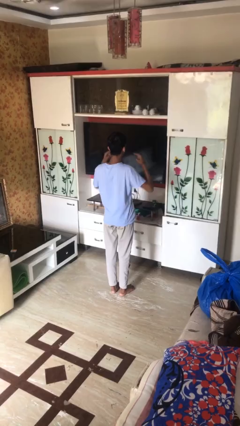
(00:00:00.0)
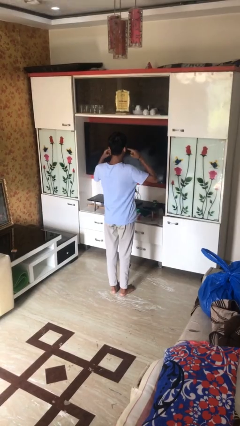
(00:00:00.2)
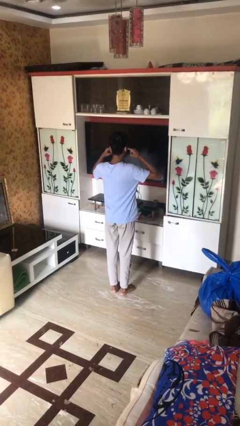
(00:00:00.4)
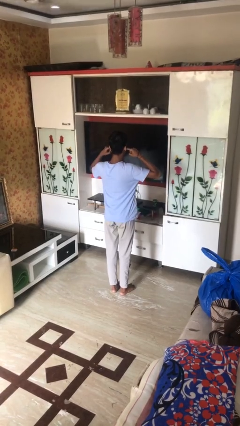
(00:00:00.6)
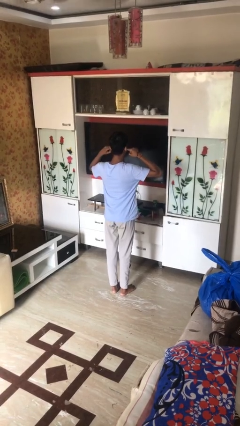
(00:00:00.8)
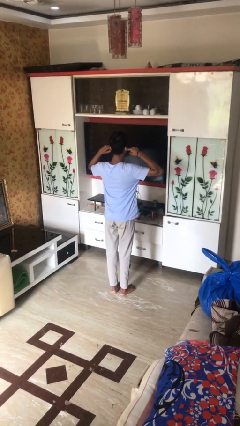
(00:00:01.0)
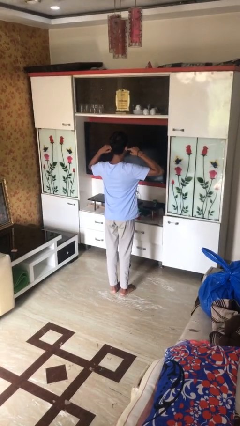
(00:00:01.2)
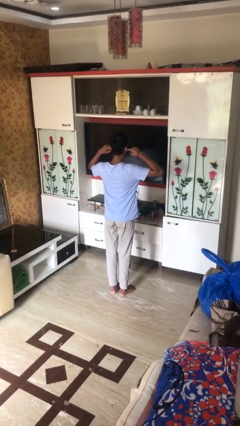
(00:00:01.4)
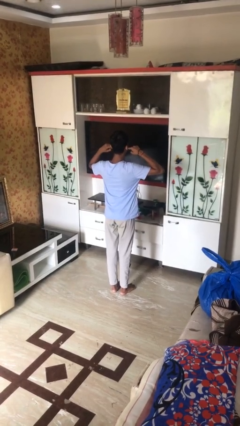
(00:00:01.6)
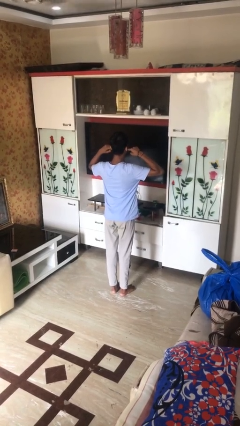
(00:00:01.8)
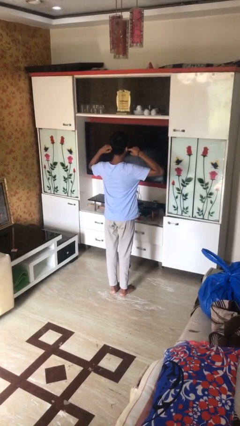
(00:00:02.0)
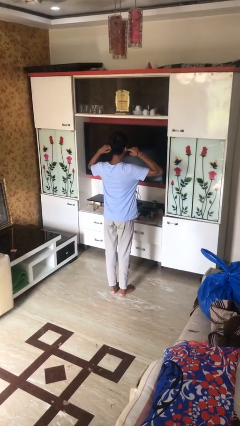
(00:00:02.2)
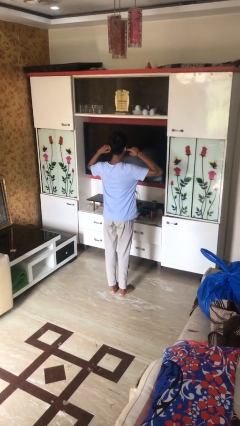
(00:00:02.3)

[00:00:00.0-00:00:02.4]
person puts fingers in ear

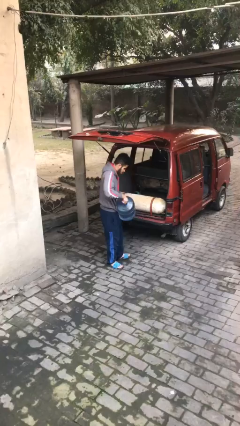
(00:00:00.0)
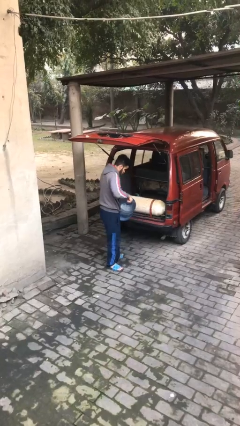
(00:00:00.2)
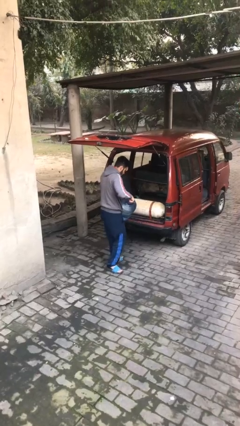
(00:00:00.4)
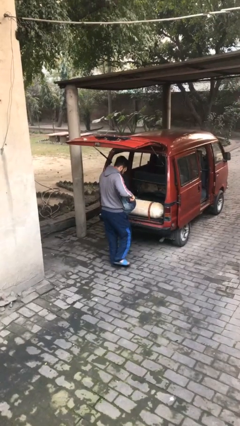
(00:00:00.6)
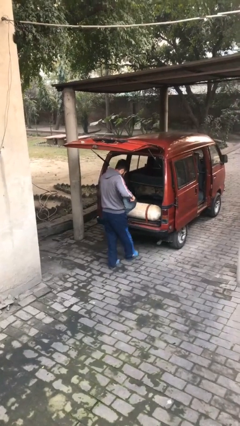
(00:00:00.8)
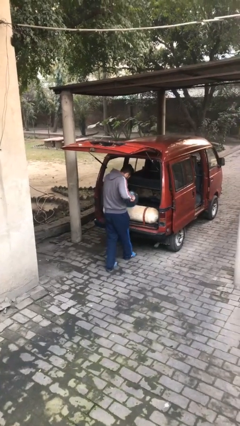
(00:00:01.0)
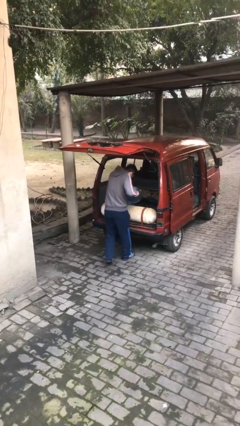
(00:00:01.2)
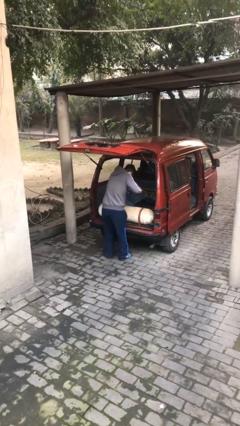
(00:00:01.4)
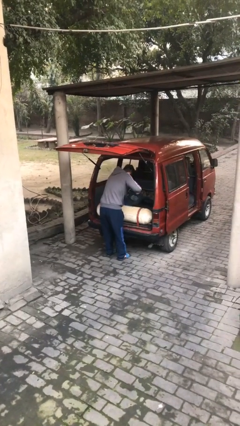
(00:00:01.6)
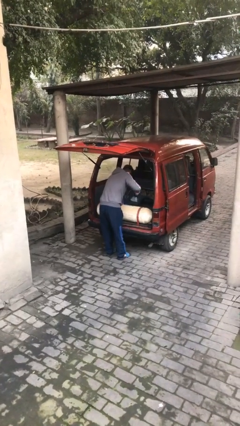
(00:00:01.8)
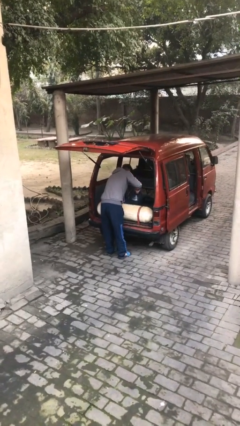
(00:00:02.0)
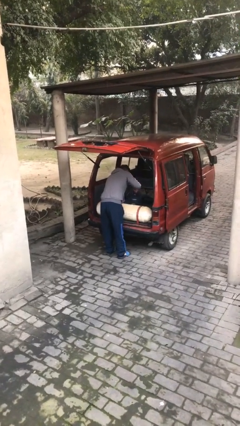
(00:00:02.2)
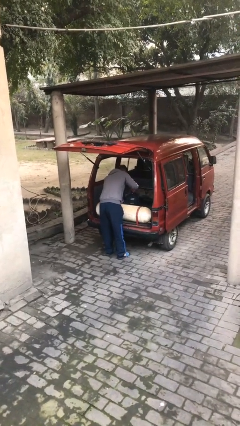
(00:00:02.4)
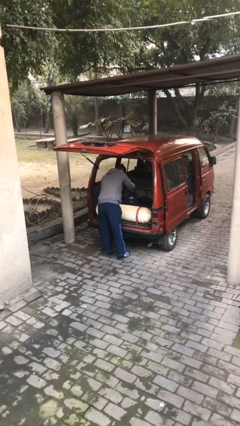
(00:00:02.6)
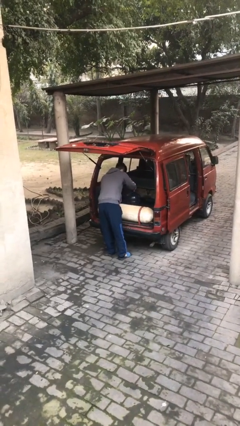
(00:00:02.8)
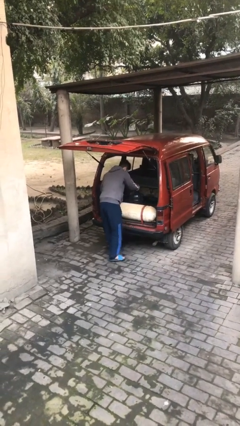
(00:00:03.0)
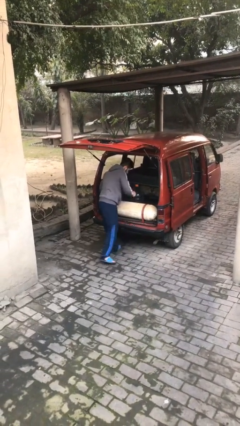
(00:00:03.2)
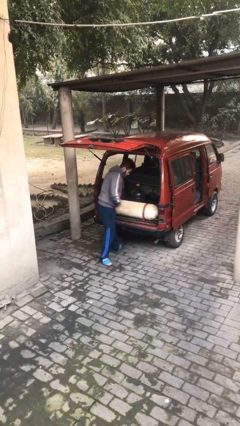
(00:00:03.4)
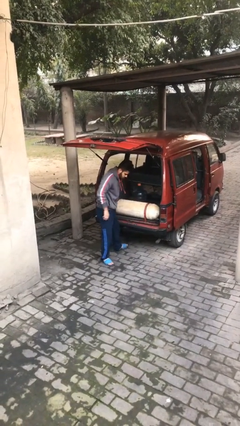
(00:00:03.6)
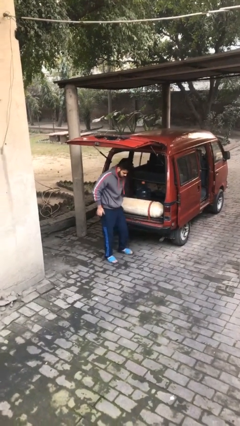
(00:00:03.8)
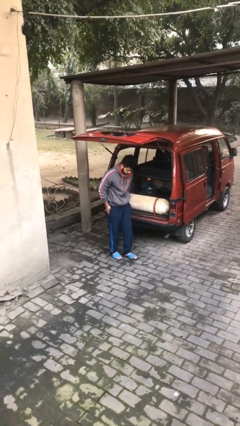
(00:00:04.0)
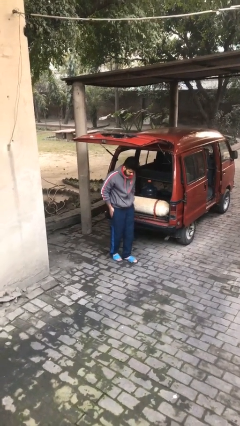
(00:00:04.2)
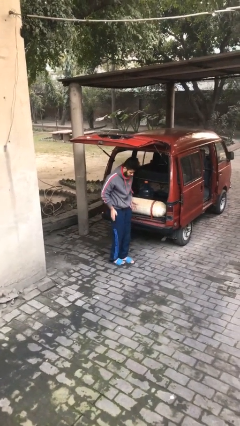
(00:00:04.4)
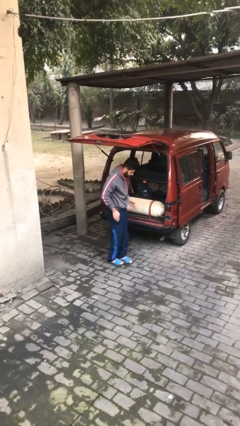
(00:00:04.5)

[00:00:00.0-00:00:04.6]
person loads car

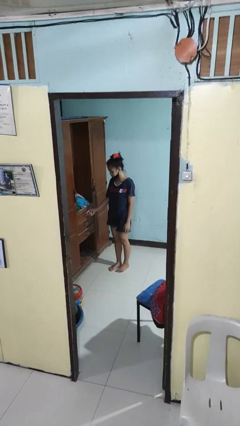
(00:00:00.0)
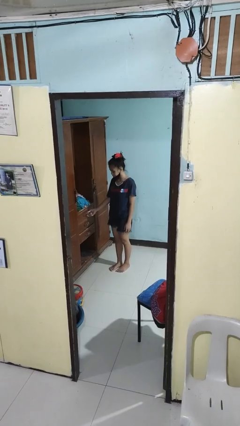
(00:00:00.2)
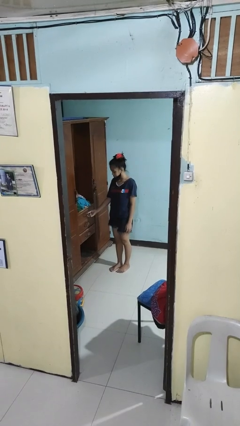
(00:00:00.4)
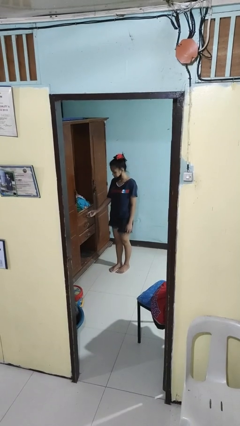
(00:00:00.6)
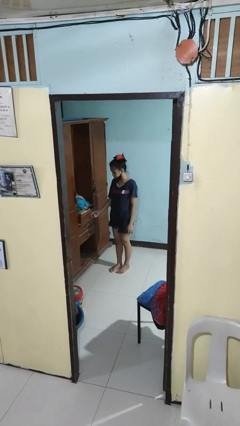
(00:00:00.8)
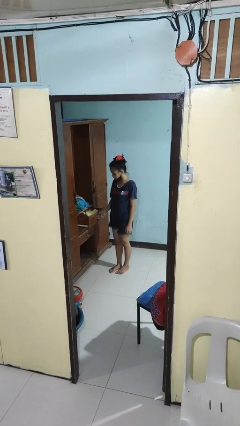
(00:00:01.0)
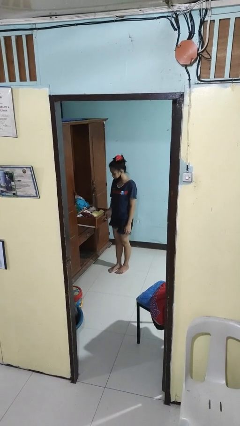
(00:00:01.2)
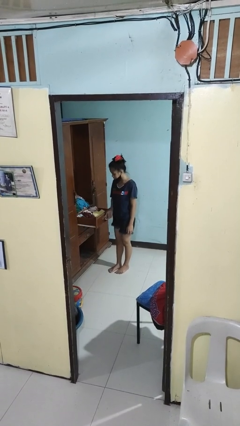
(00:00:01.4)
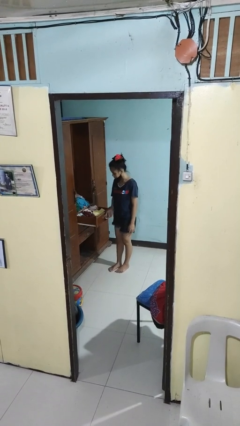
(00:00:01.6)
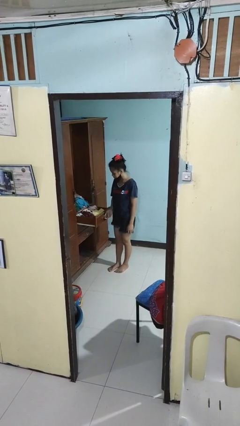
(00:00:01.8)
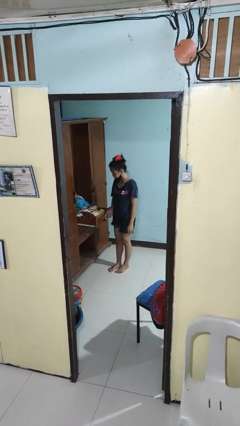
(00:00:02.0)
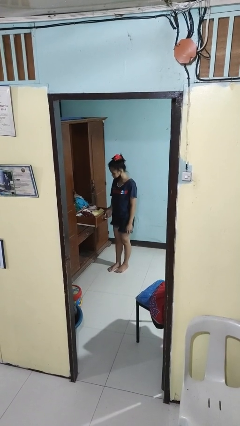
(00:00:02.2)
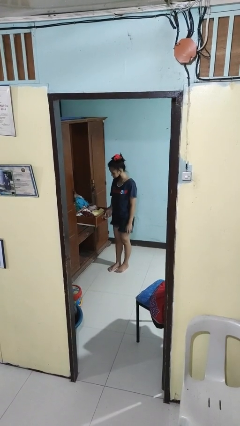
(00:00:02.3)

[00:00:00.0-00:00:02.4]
person opens dresser drawer

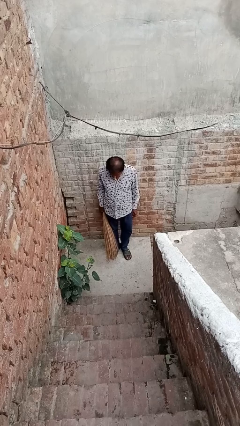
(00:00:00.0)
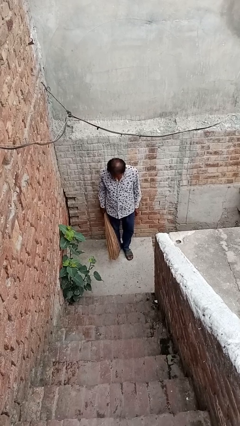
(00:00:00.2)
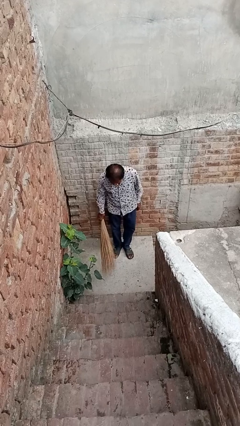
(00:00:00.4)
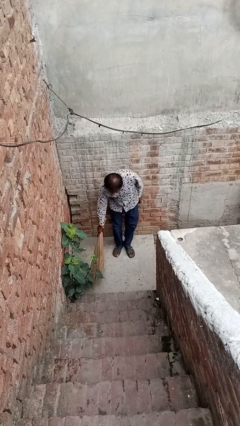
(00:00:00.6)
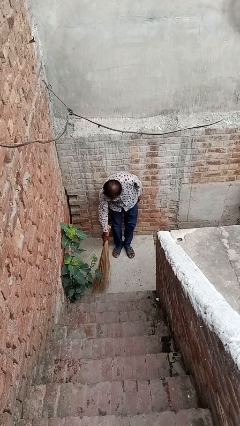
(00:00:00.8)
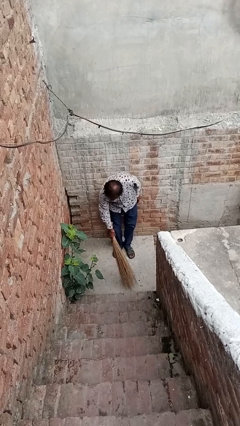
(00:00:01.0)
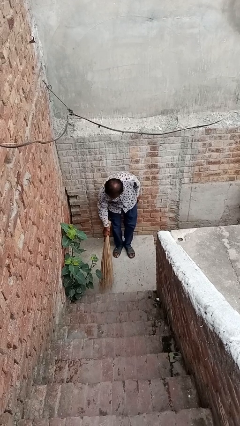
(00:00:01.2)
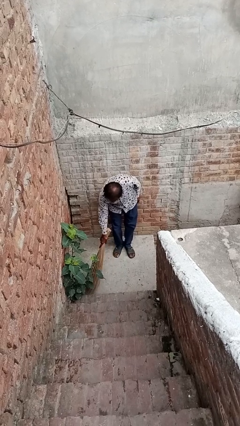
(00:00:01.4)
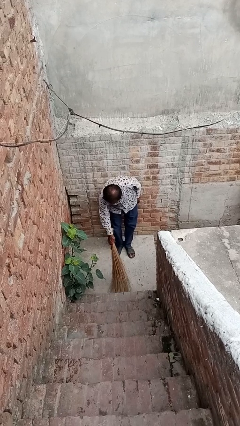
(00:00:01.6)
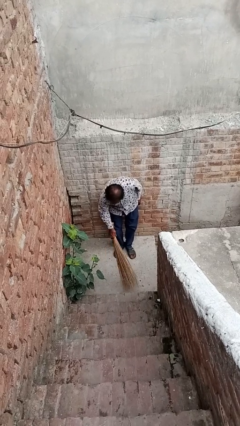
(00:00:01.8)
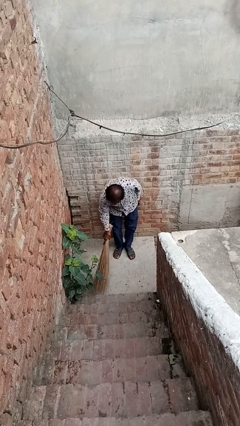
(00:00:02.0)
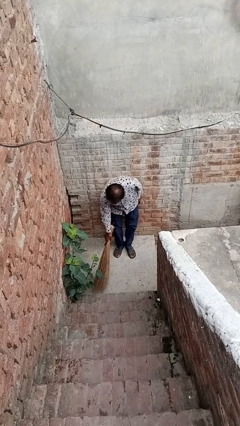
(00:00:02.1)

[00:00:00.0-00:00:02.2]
person sweeps floor

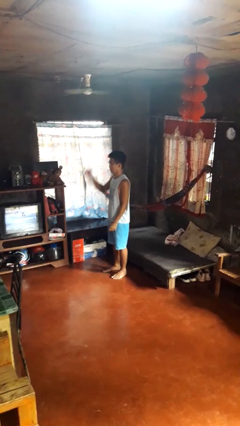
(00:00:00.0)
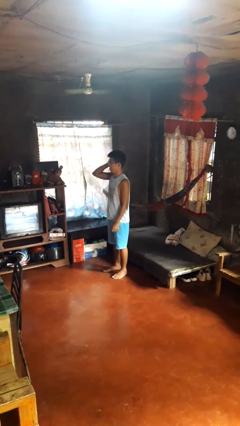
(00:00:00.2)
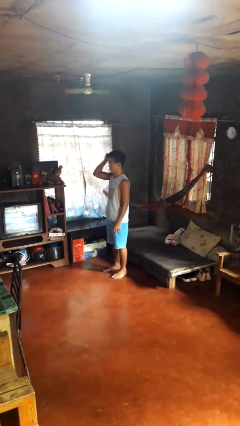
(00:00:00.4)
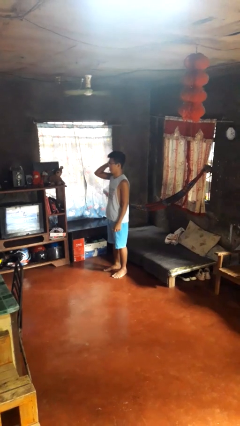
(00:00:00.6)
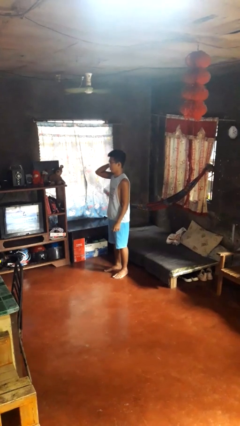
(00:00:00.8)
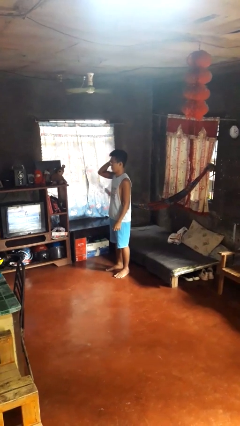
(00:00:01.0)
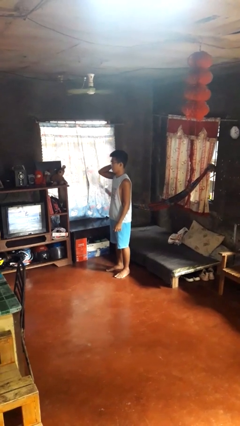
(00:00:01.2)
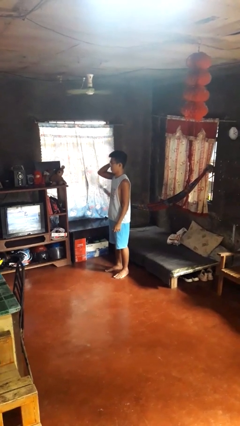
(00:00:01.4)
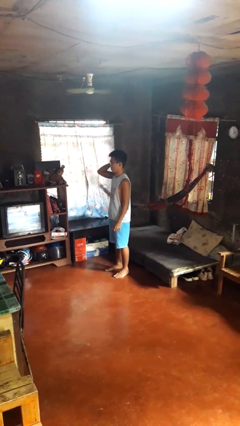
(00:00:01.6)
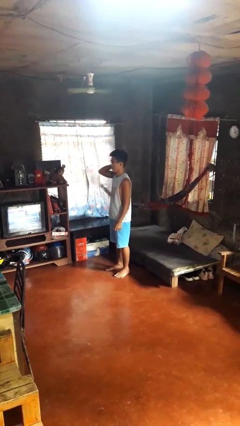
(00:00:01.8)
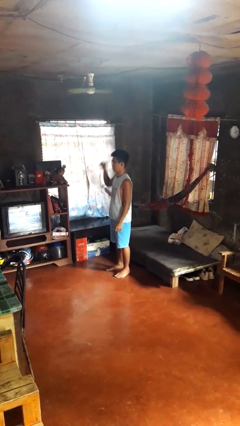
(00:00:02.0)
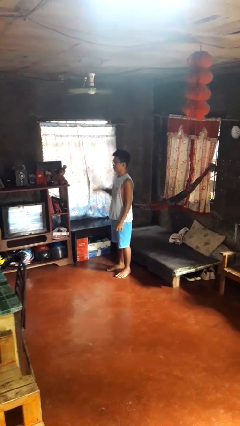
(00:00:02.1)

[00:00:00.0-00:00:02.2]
person gestures behind me

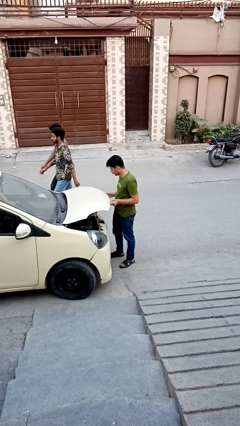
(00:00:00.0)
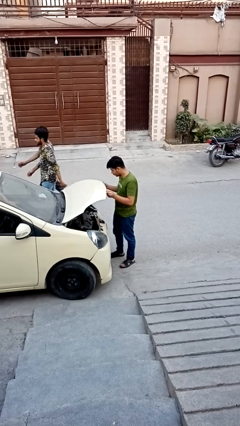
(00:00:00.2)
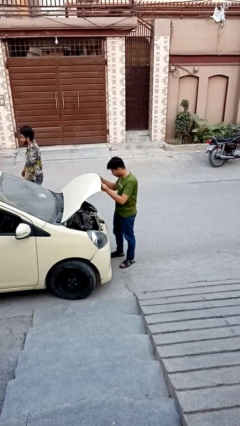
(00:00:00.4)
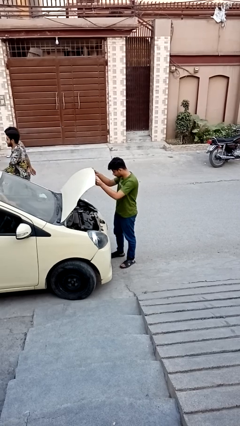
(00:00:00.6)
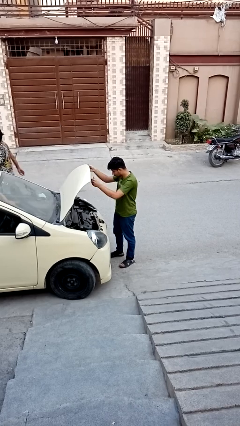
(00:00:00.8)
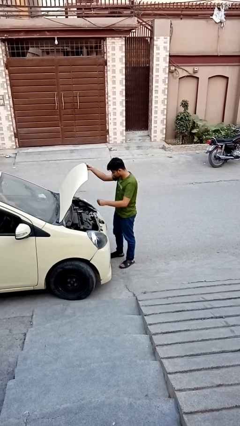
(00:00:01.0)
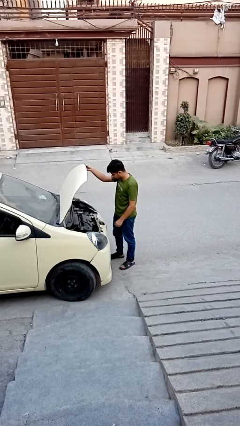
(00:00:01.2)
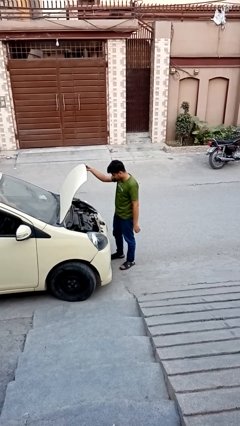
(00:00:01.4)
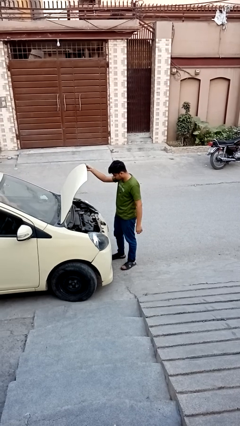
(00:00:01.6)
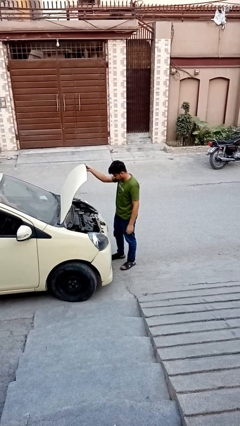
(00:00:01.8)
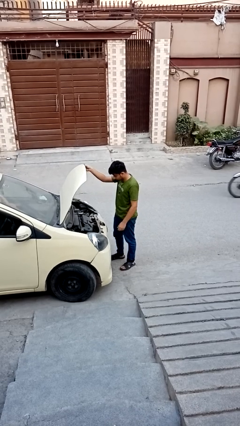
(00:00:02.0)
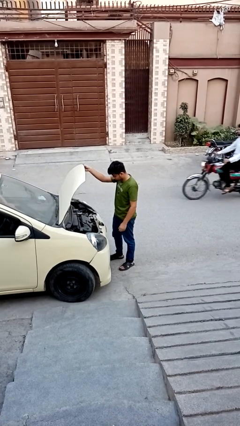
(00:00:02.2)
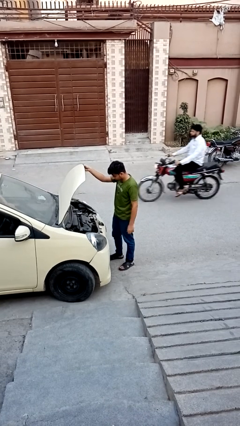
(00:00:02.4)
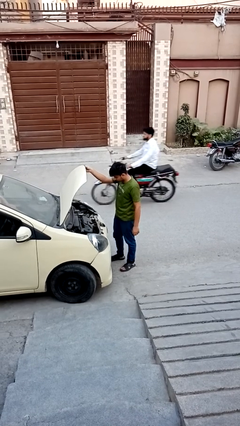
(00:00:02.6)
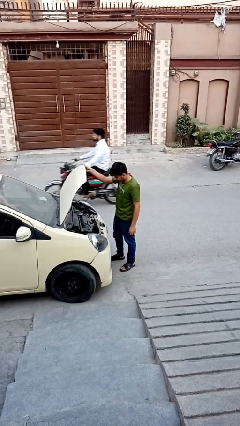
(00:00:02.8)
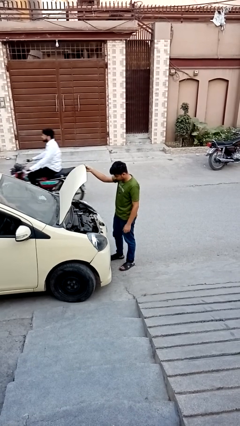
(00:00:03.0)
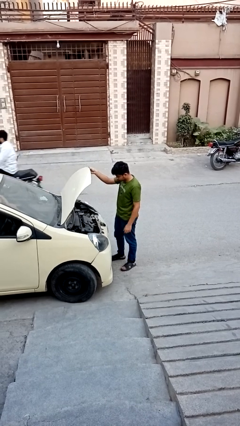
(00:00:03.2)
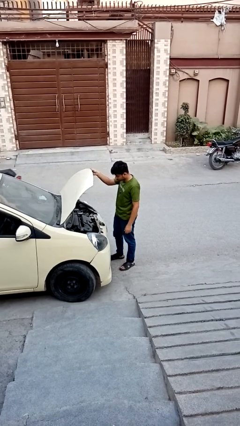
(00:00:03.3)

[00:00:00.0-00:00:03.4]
person opens car hood
